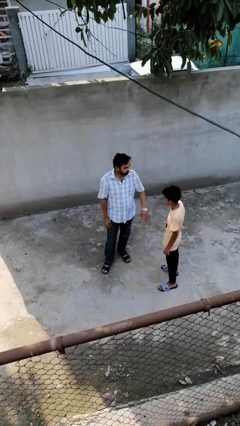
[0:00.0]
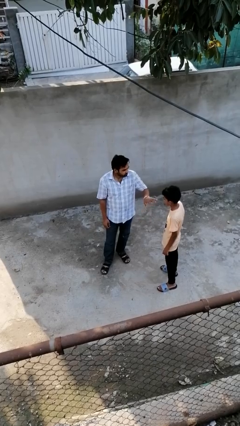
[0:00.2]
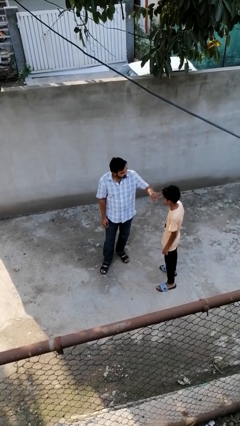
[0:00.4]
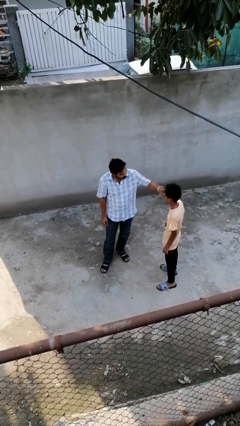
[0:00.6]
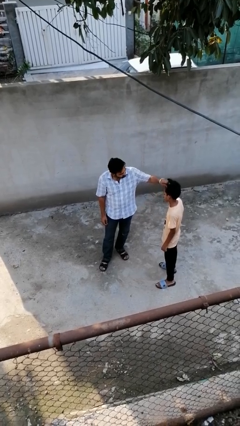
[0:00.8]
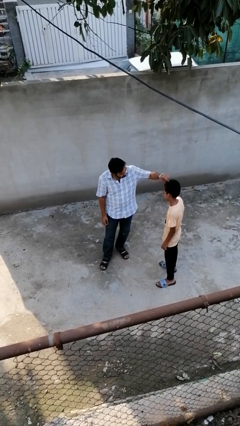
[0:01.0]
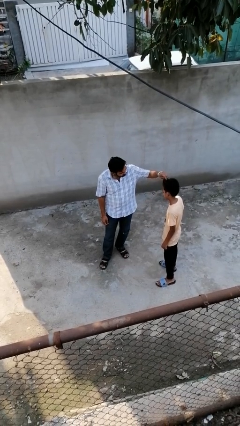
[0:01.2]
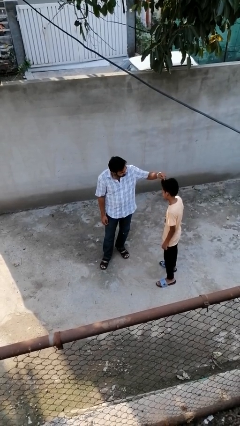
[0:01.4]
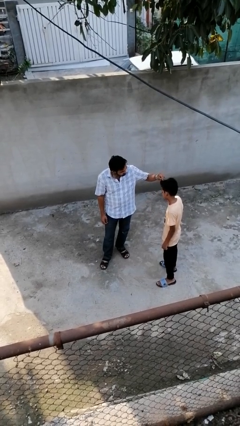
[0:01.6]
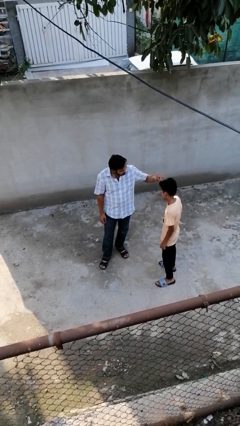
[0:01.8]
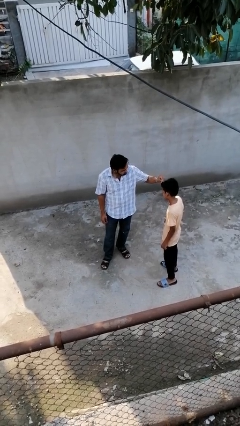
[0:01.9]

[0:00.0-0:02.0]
person grabs person by hair

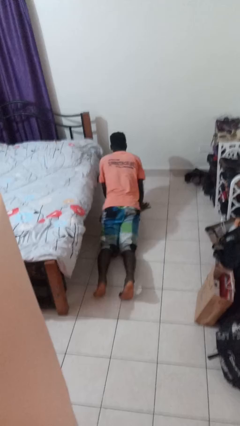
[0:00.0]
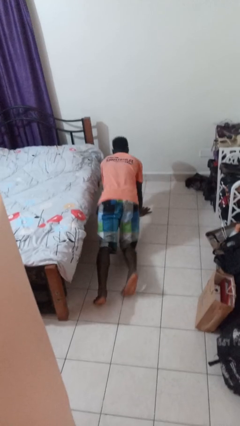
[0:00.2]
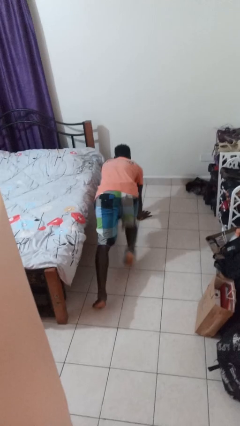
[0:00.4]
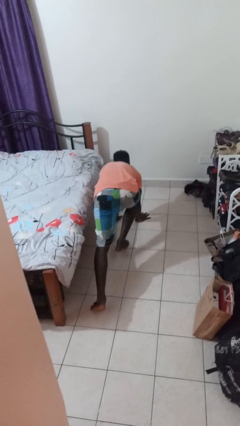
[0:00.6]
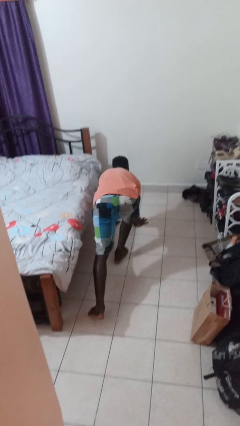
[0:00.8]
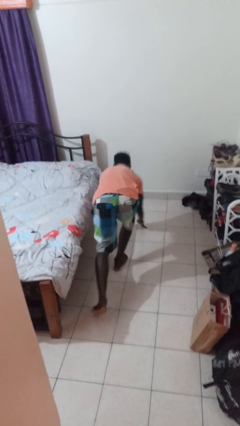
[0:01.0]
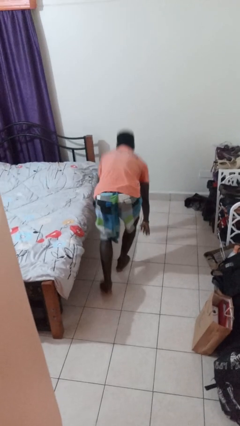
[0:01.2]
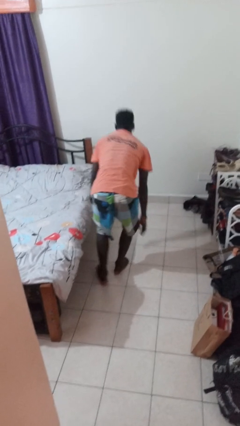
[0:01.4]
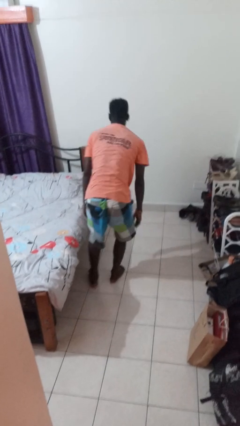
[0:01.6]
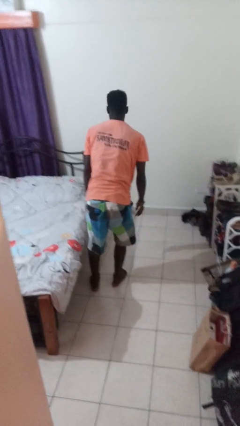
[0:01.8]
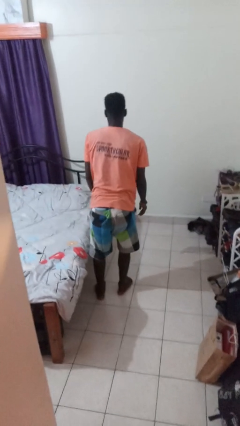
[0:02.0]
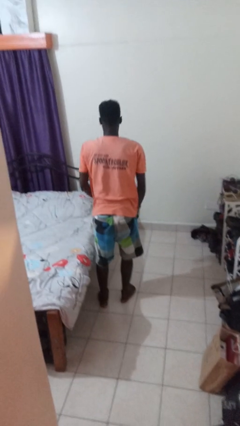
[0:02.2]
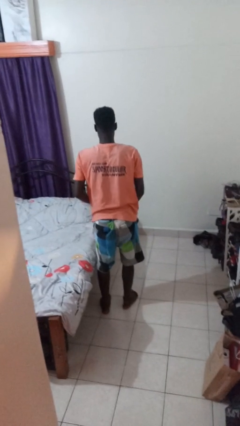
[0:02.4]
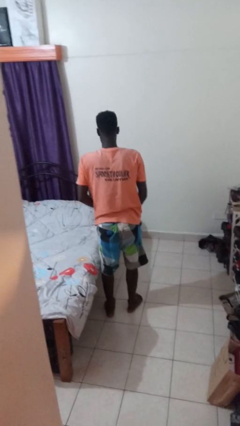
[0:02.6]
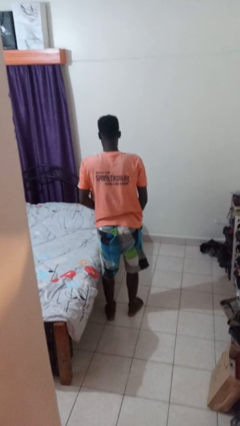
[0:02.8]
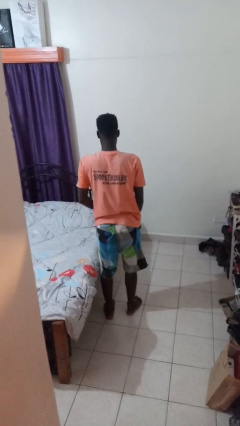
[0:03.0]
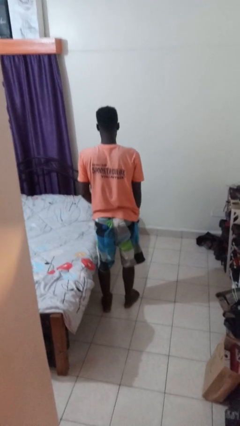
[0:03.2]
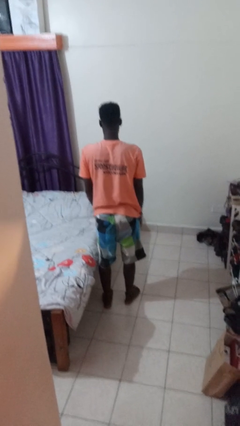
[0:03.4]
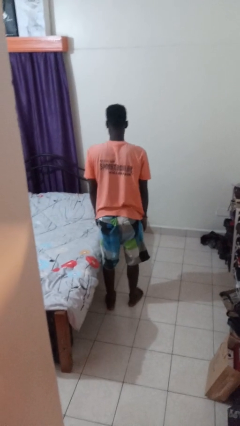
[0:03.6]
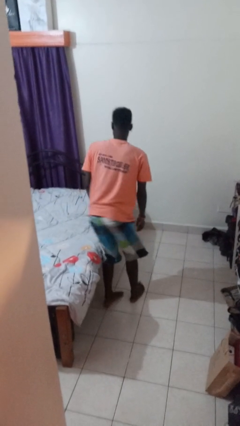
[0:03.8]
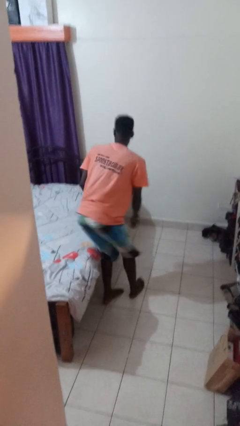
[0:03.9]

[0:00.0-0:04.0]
person stands up from floor

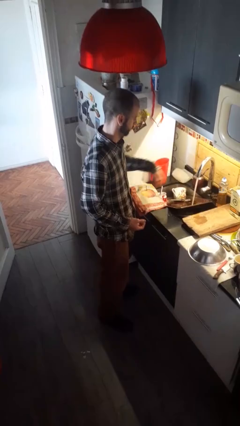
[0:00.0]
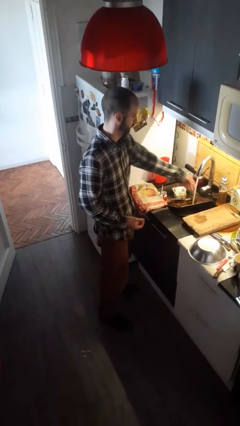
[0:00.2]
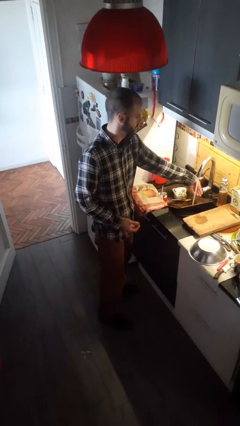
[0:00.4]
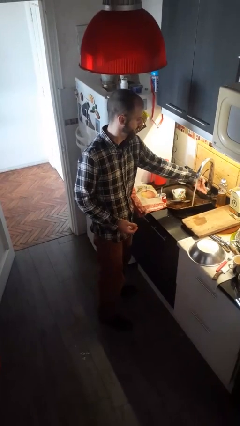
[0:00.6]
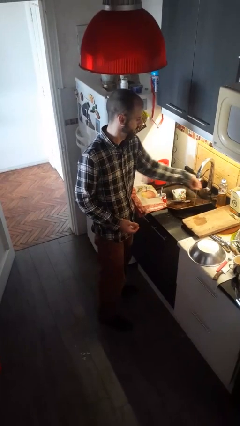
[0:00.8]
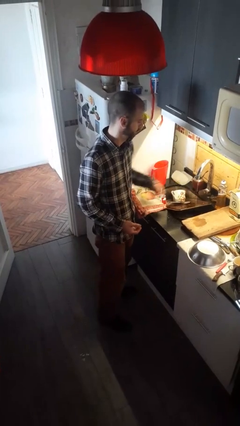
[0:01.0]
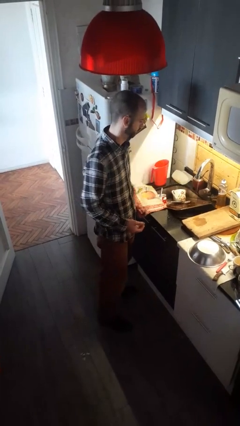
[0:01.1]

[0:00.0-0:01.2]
person turns off faucet

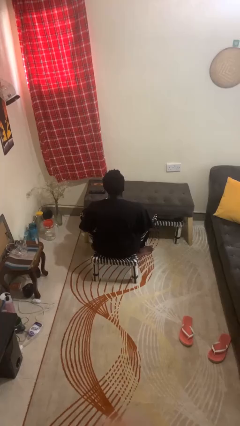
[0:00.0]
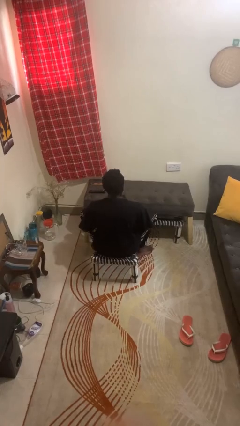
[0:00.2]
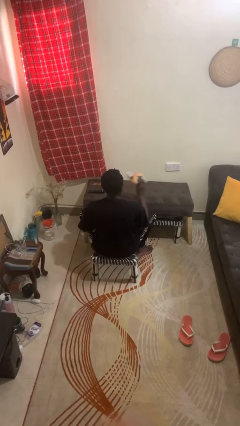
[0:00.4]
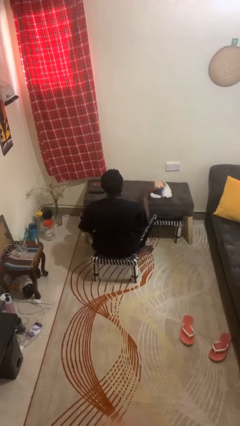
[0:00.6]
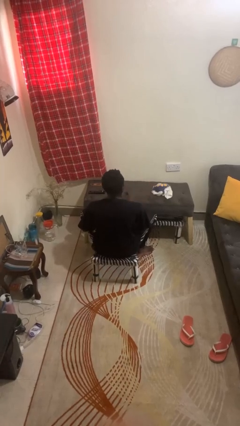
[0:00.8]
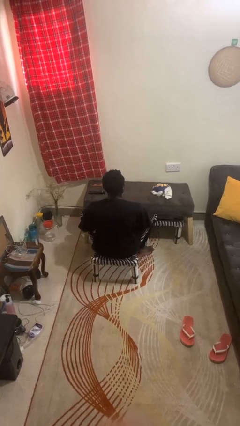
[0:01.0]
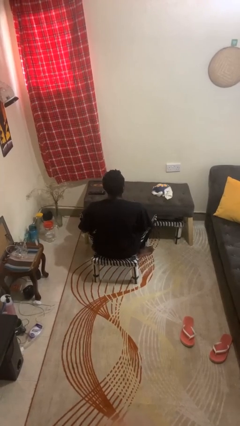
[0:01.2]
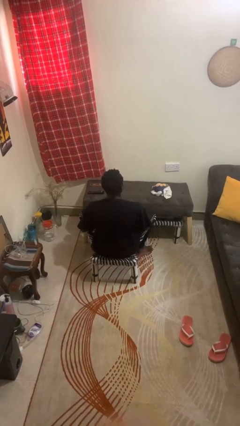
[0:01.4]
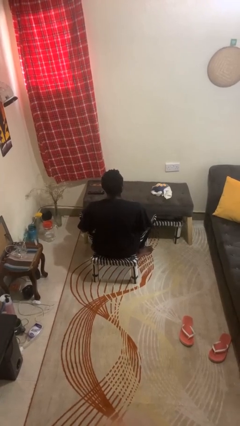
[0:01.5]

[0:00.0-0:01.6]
person throws object on table

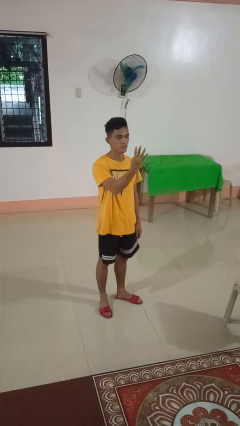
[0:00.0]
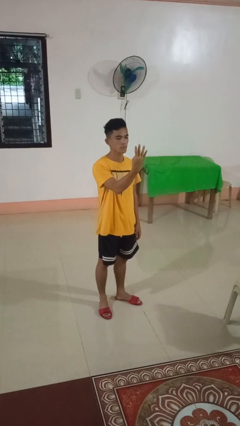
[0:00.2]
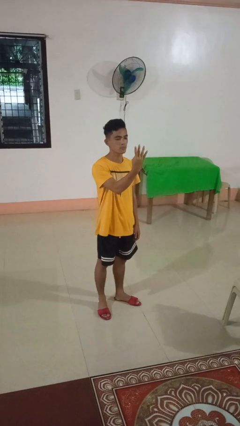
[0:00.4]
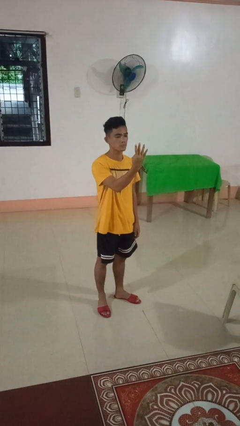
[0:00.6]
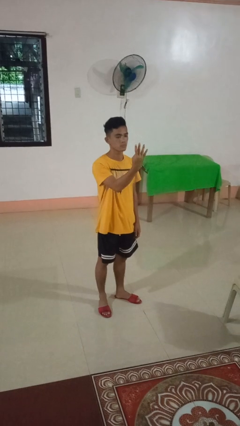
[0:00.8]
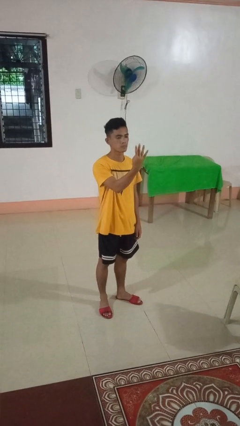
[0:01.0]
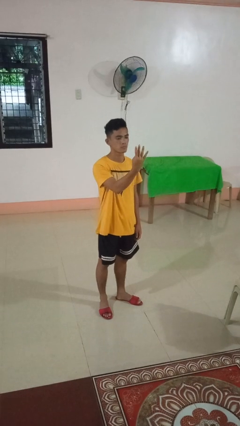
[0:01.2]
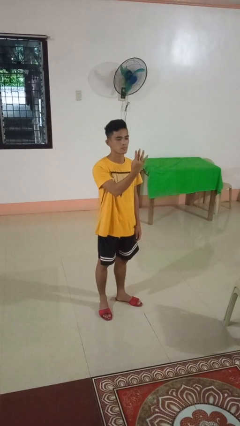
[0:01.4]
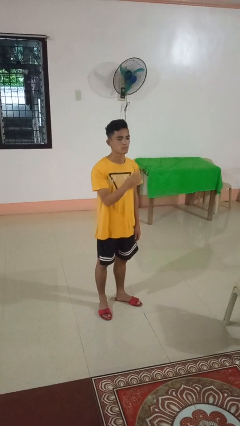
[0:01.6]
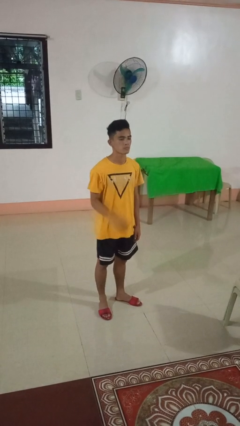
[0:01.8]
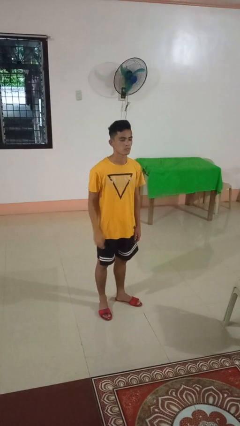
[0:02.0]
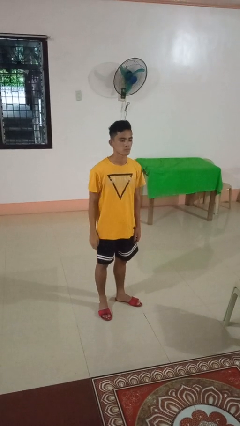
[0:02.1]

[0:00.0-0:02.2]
person gestures number four

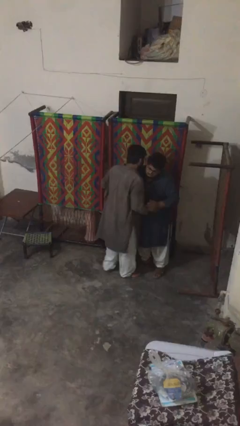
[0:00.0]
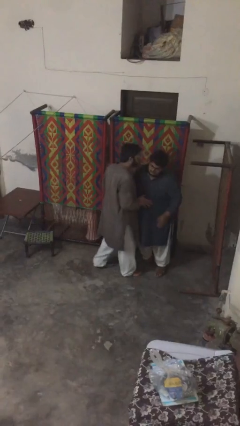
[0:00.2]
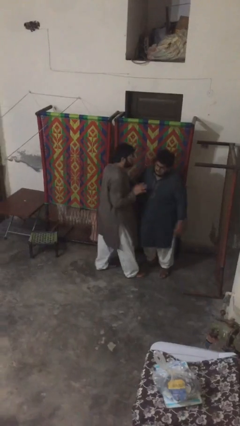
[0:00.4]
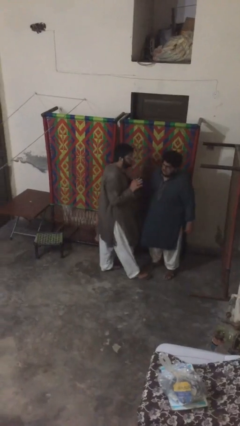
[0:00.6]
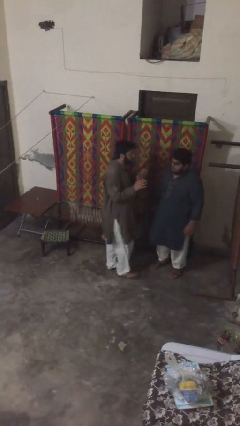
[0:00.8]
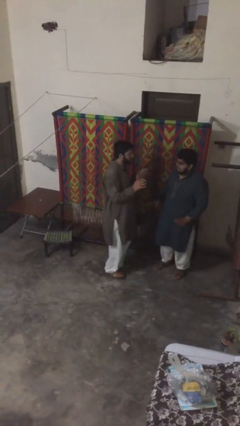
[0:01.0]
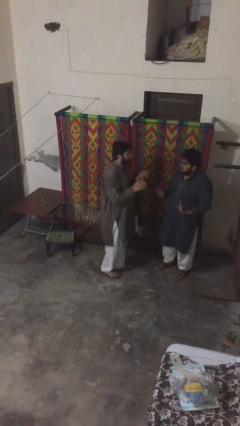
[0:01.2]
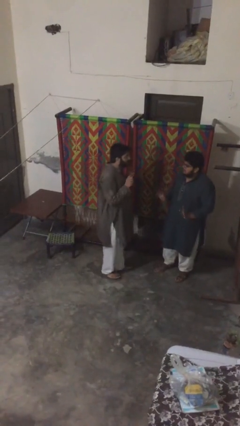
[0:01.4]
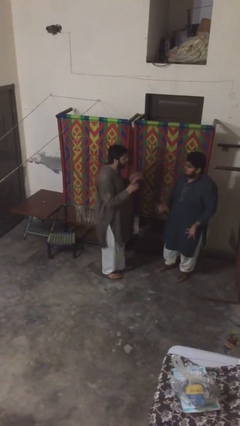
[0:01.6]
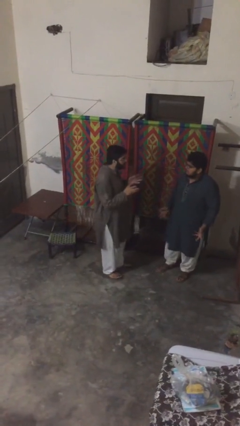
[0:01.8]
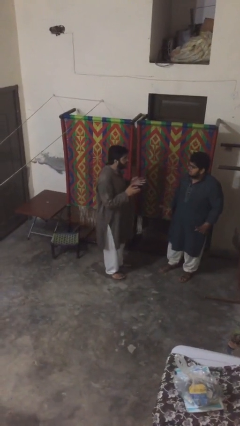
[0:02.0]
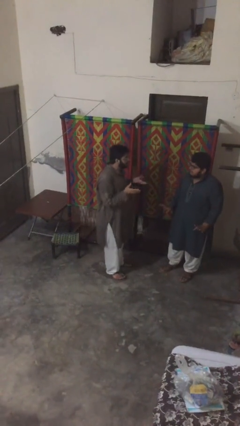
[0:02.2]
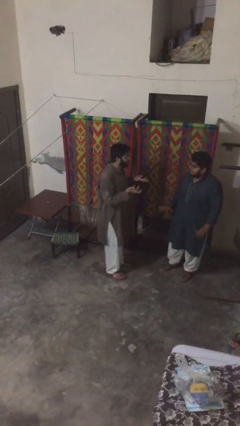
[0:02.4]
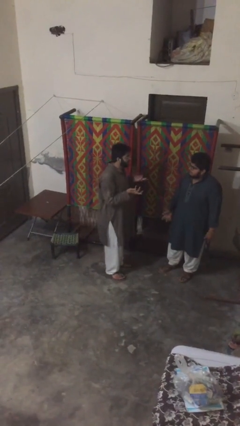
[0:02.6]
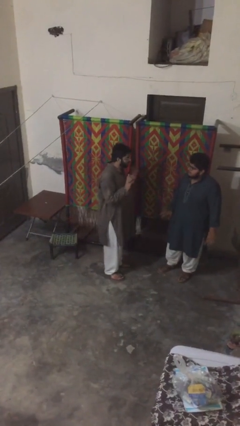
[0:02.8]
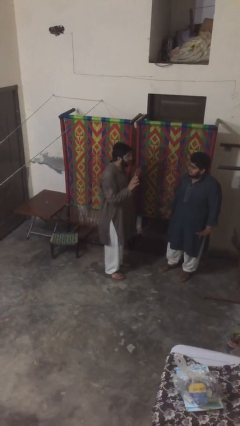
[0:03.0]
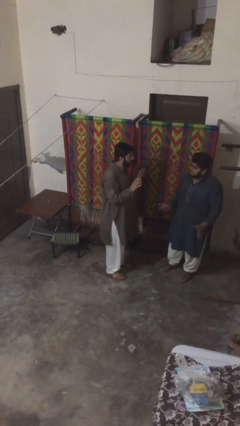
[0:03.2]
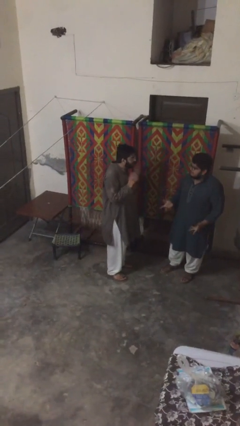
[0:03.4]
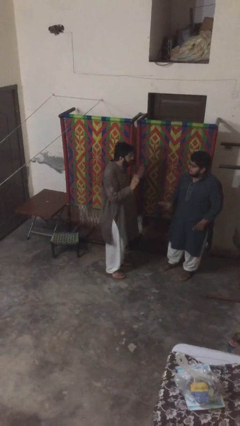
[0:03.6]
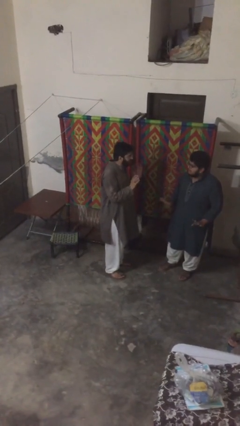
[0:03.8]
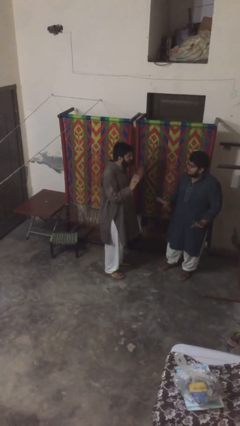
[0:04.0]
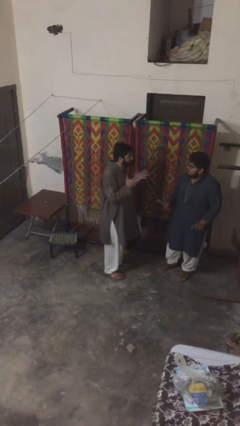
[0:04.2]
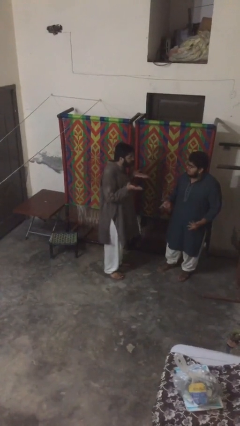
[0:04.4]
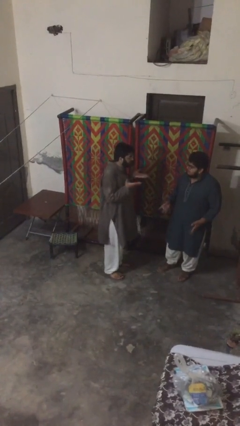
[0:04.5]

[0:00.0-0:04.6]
person talks to person

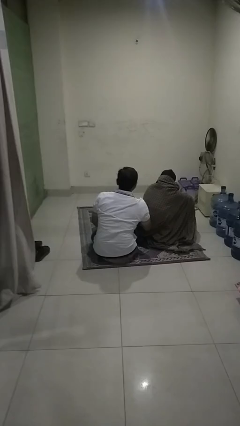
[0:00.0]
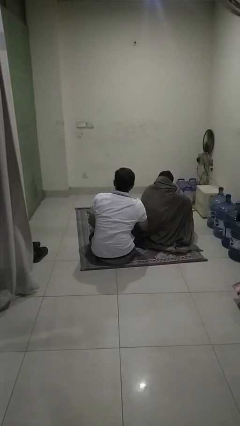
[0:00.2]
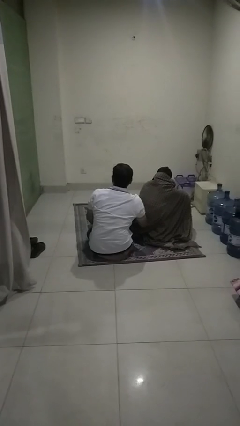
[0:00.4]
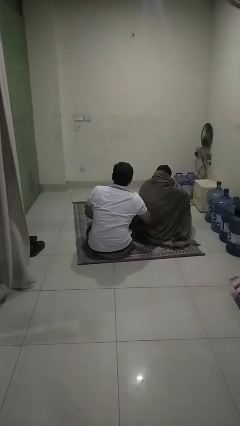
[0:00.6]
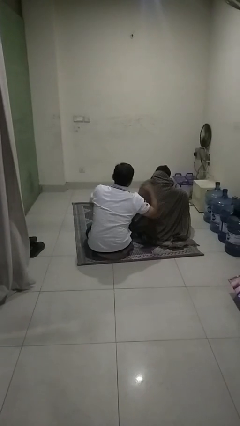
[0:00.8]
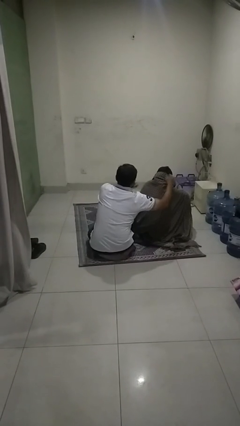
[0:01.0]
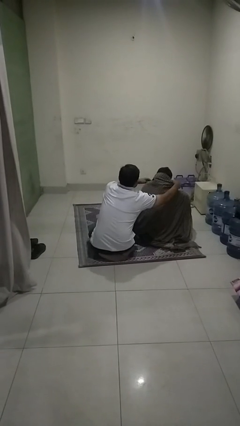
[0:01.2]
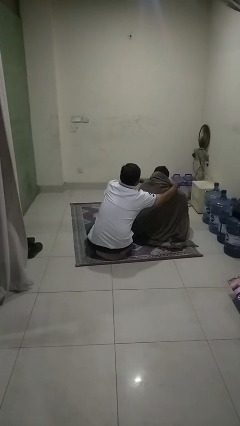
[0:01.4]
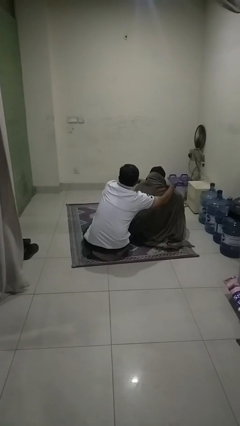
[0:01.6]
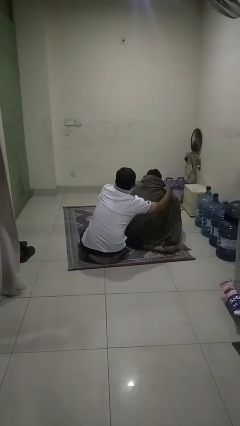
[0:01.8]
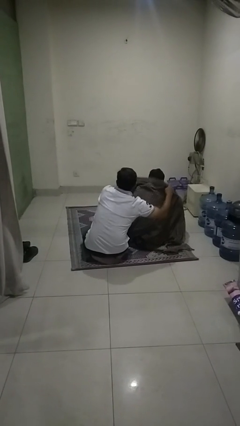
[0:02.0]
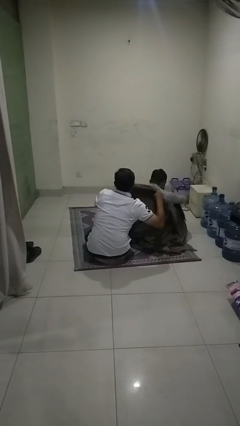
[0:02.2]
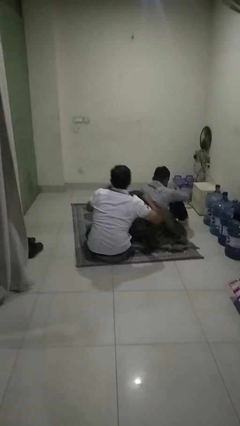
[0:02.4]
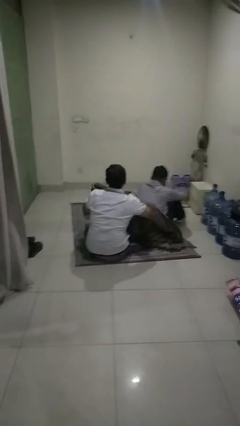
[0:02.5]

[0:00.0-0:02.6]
person uncovers friend with blanket
